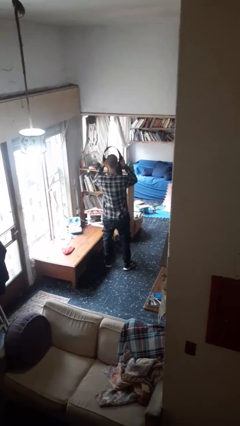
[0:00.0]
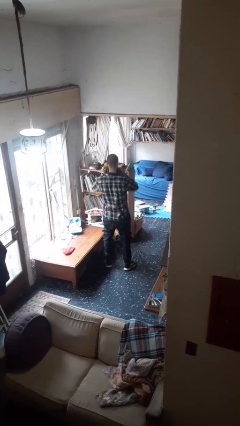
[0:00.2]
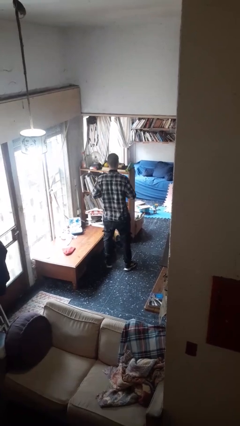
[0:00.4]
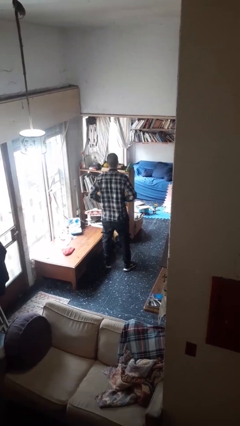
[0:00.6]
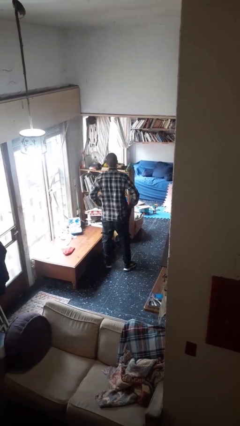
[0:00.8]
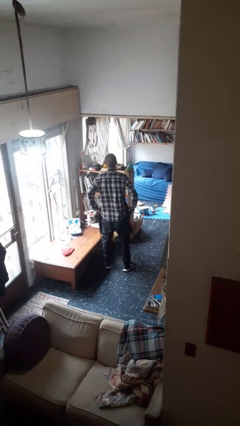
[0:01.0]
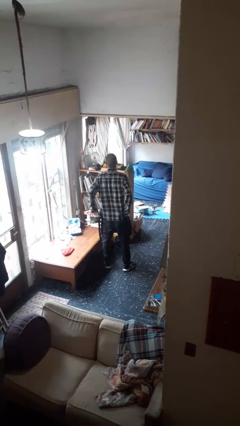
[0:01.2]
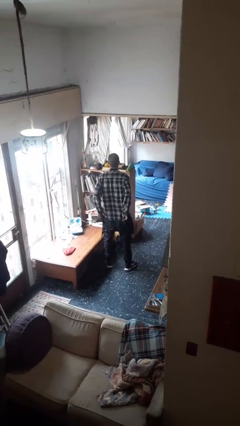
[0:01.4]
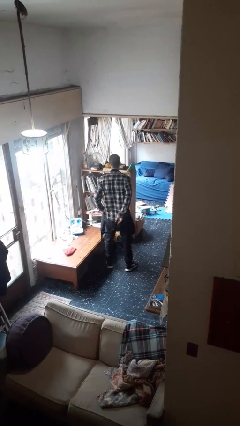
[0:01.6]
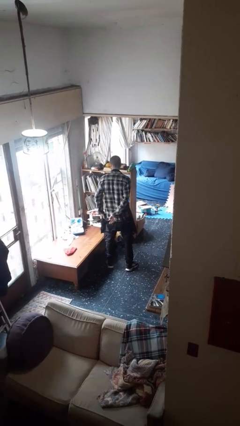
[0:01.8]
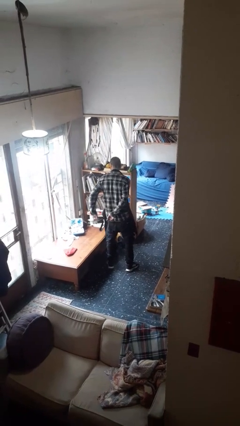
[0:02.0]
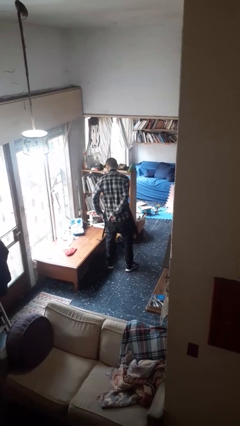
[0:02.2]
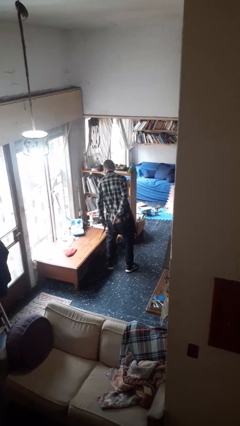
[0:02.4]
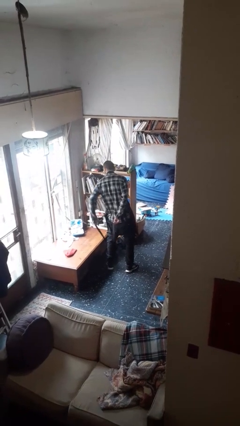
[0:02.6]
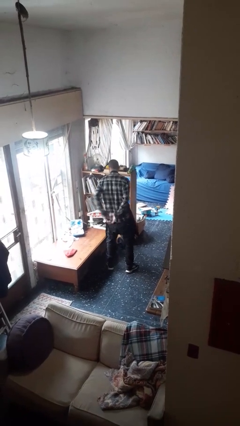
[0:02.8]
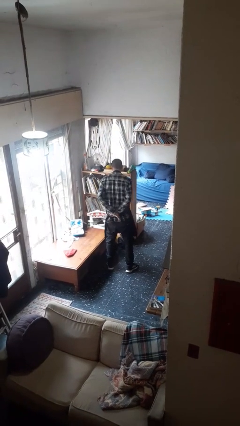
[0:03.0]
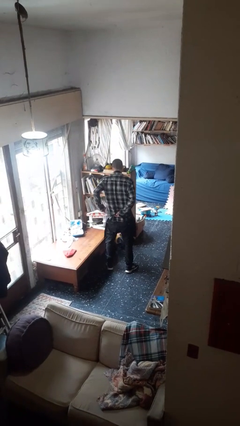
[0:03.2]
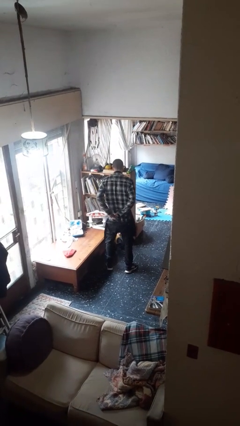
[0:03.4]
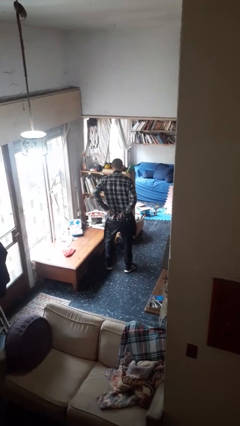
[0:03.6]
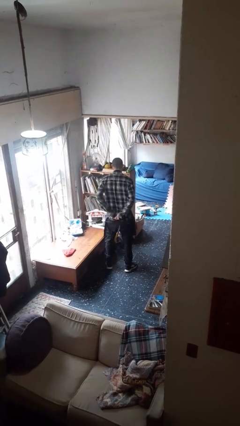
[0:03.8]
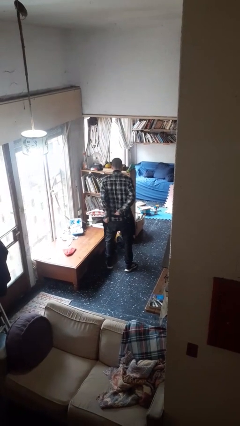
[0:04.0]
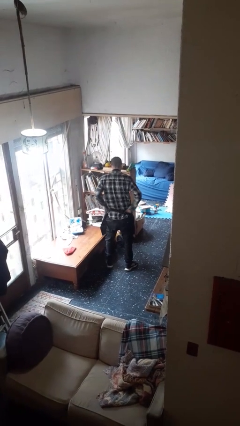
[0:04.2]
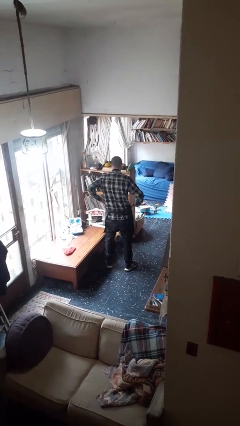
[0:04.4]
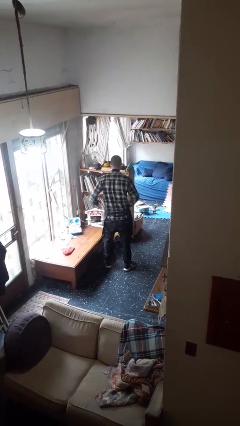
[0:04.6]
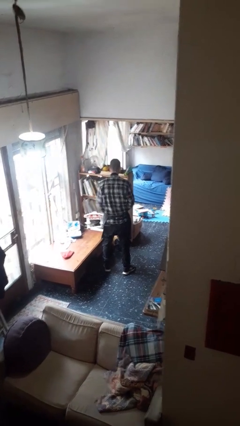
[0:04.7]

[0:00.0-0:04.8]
person puts on apron

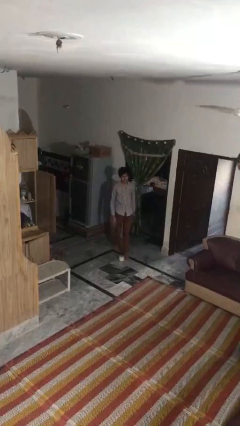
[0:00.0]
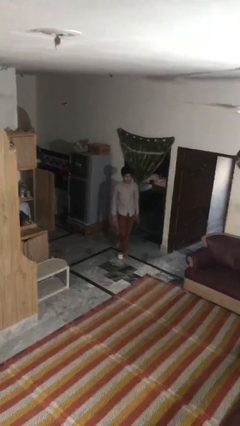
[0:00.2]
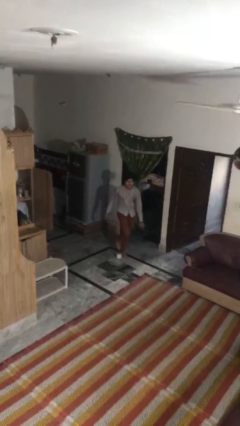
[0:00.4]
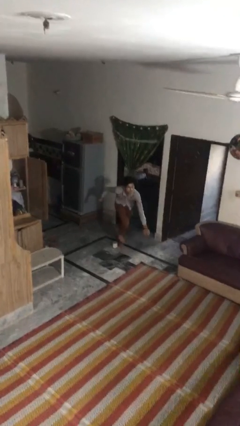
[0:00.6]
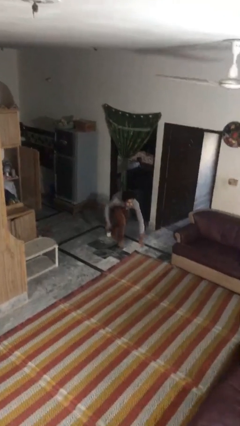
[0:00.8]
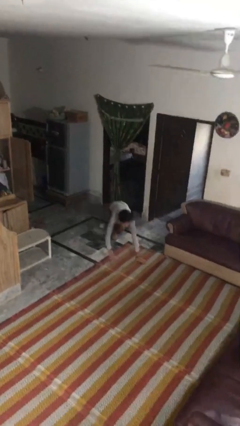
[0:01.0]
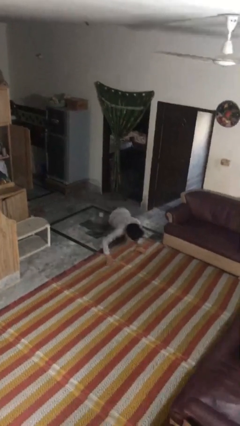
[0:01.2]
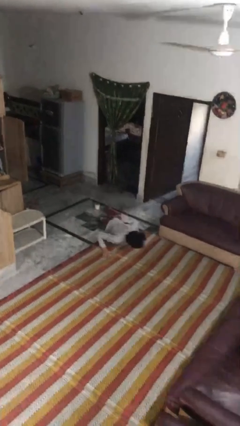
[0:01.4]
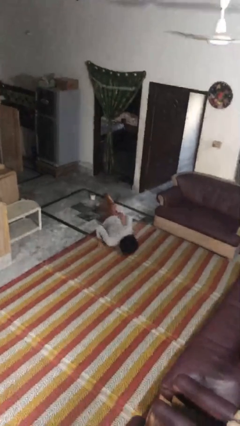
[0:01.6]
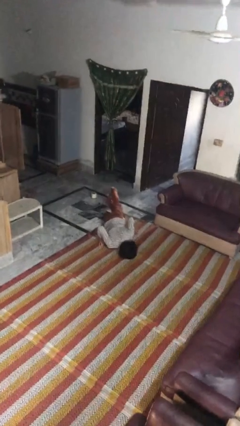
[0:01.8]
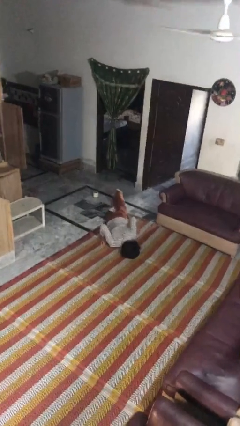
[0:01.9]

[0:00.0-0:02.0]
person trips on object on floor

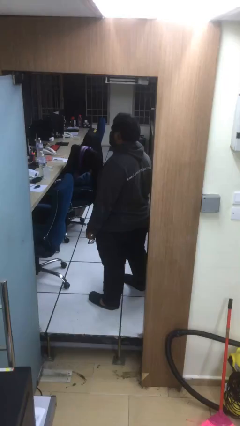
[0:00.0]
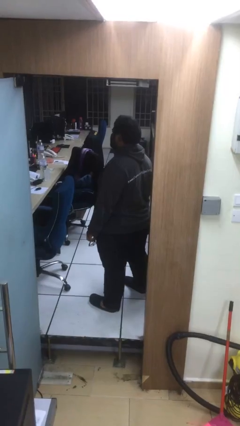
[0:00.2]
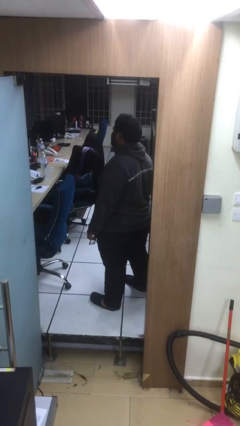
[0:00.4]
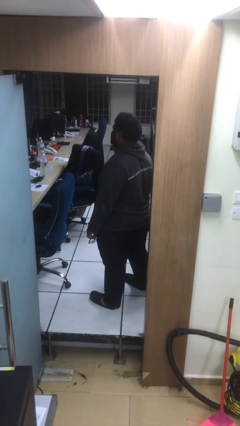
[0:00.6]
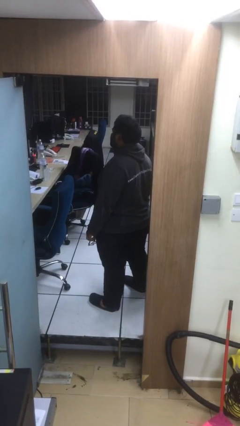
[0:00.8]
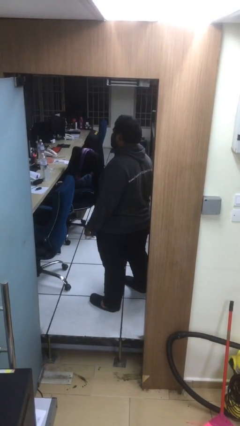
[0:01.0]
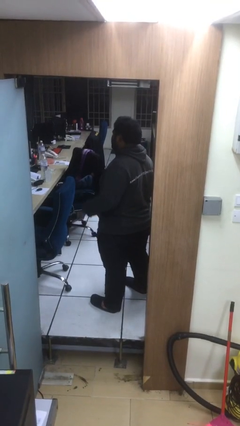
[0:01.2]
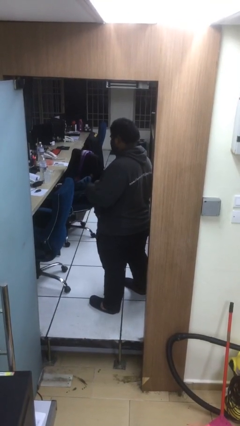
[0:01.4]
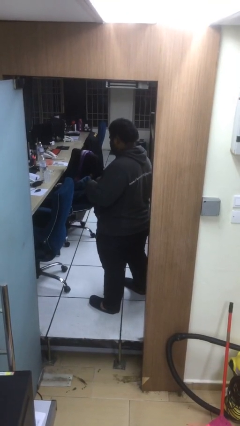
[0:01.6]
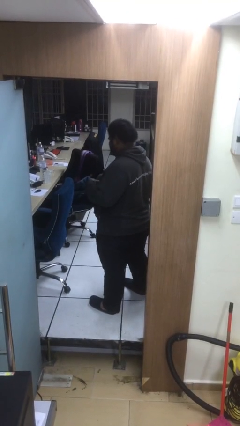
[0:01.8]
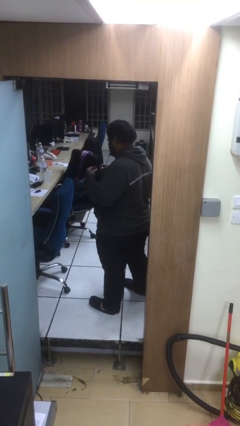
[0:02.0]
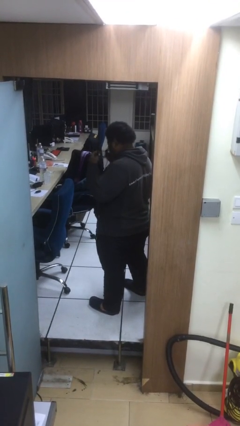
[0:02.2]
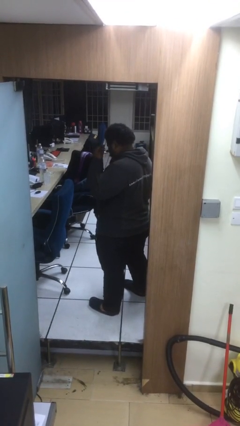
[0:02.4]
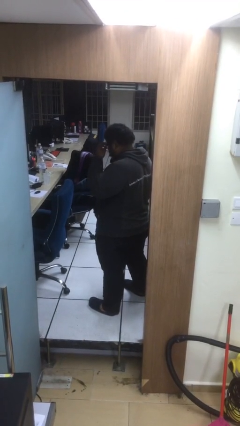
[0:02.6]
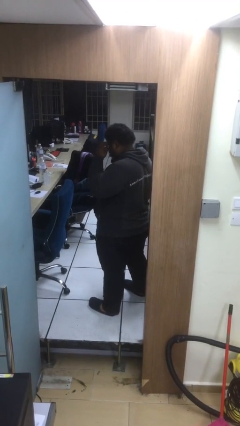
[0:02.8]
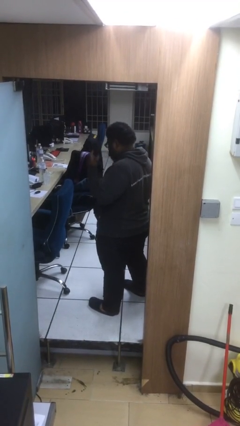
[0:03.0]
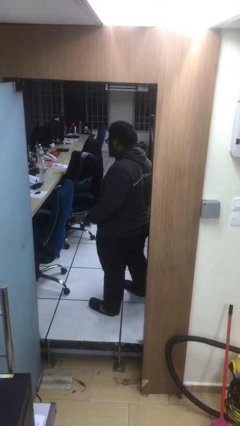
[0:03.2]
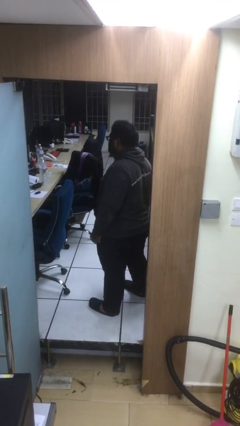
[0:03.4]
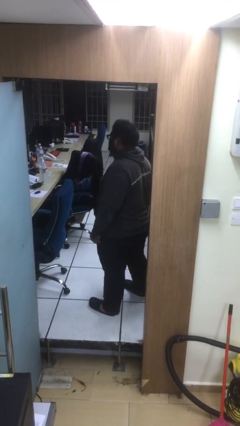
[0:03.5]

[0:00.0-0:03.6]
person puts on glasses

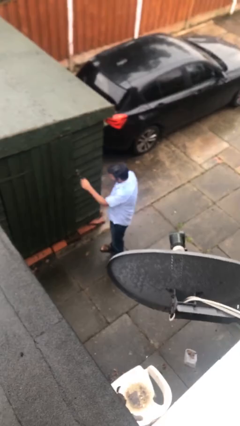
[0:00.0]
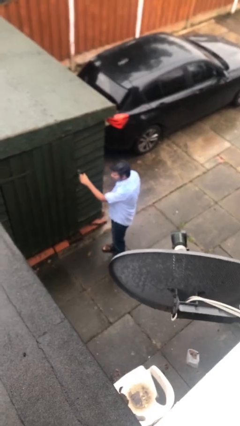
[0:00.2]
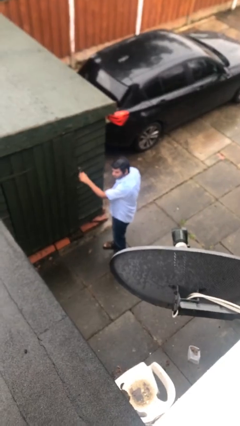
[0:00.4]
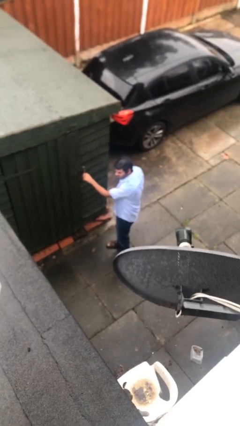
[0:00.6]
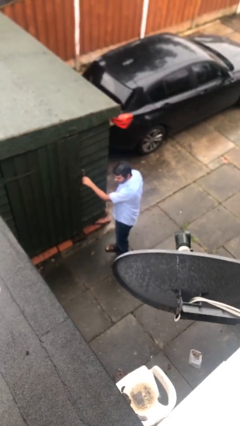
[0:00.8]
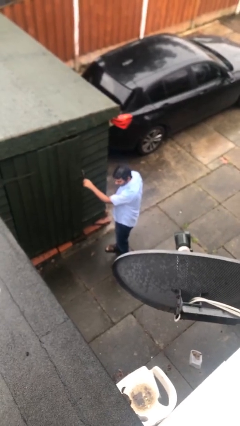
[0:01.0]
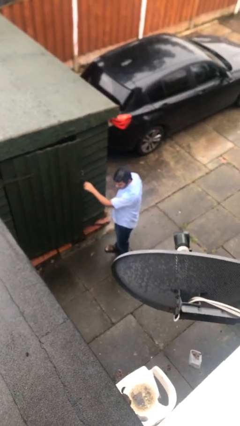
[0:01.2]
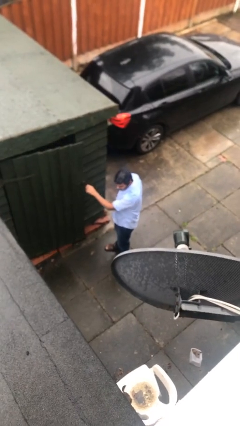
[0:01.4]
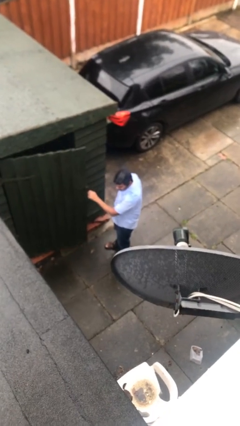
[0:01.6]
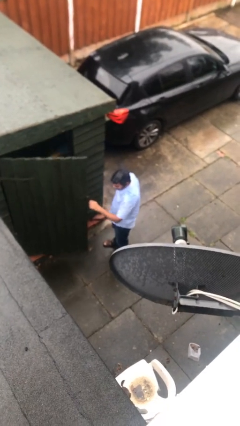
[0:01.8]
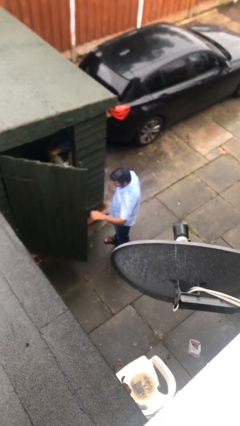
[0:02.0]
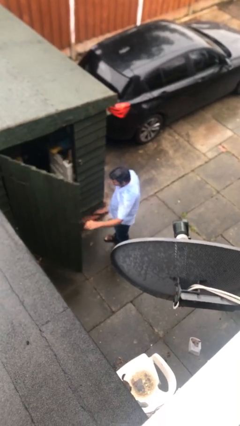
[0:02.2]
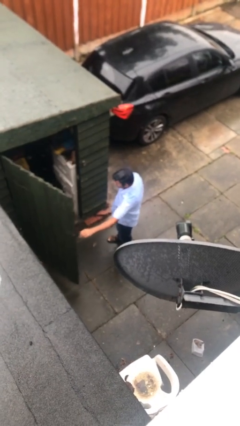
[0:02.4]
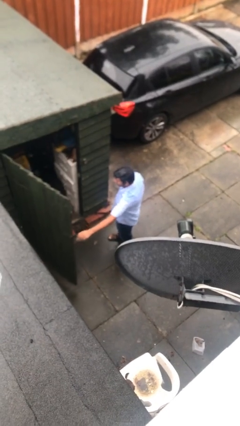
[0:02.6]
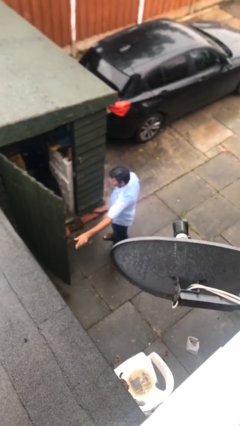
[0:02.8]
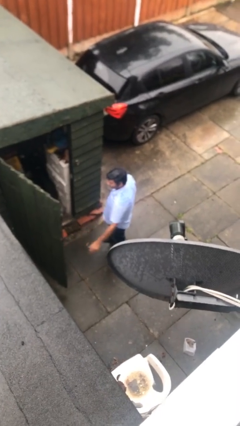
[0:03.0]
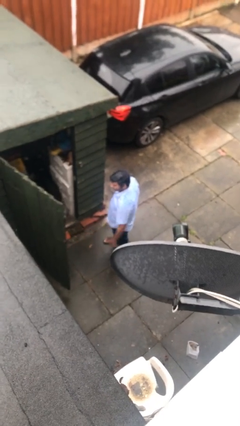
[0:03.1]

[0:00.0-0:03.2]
person opens facility door

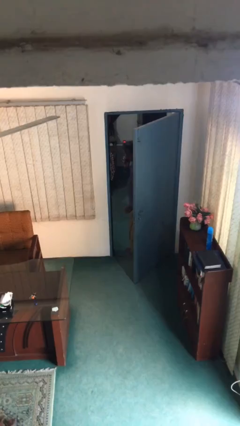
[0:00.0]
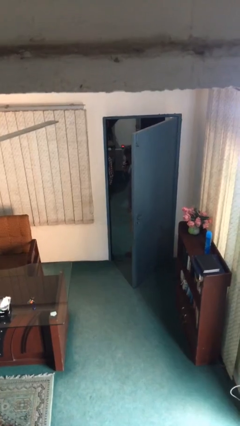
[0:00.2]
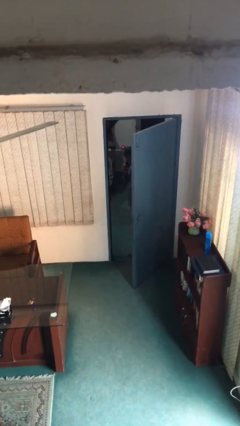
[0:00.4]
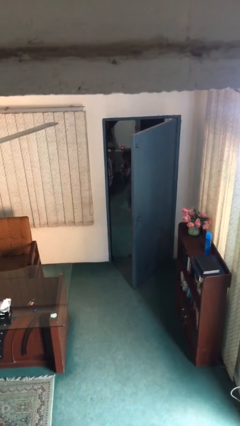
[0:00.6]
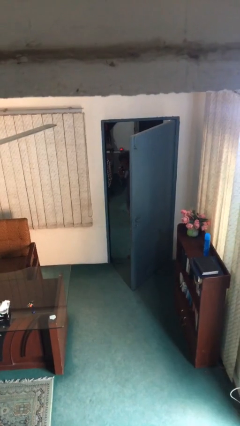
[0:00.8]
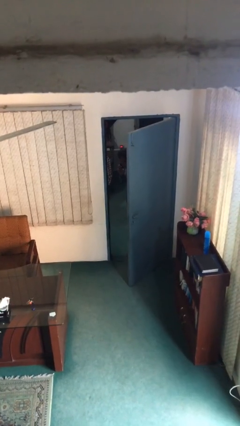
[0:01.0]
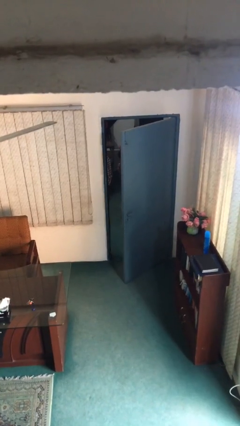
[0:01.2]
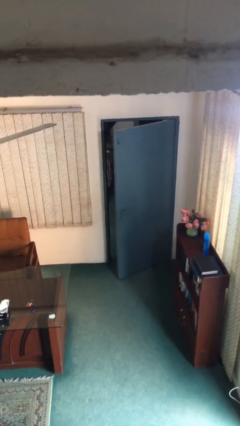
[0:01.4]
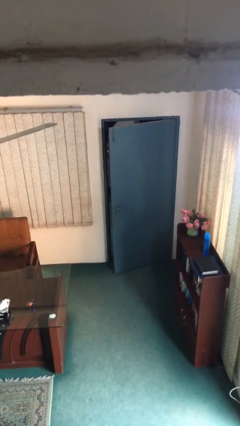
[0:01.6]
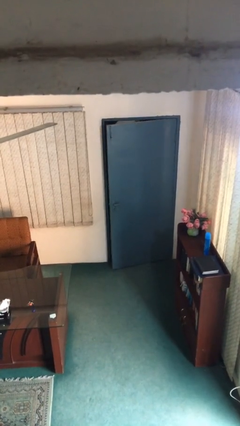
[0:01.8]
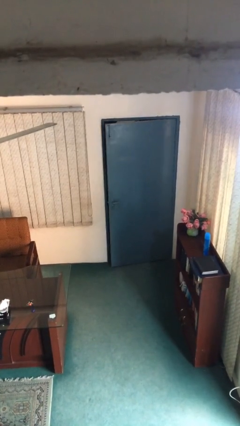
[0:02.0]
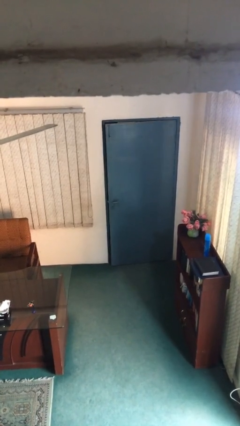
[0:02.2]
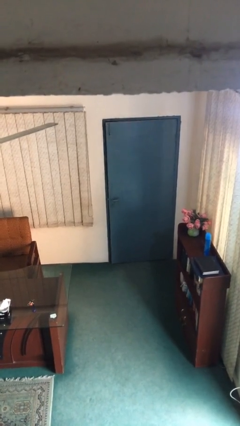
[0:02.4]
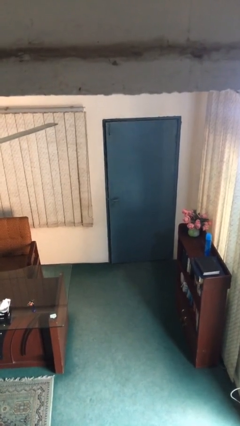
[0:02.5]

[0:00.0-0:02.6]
person closes facility door

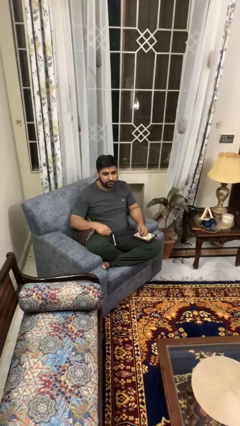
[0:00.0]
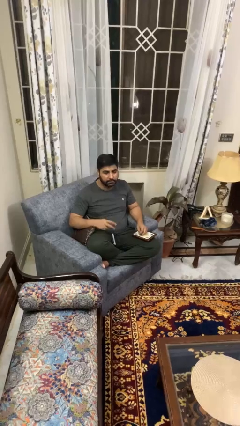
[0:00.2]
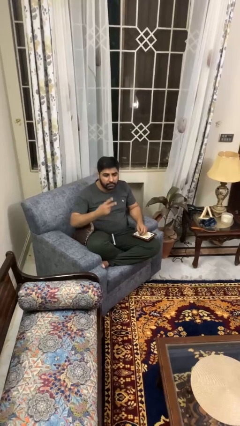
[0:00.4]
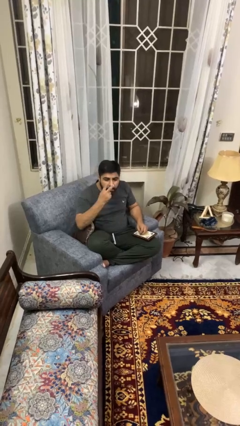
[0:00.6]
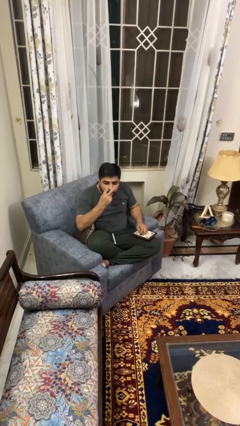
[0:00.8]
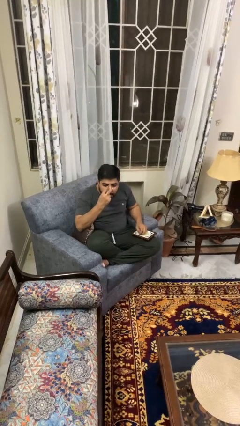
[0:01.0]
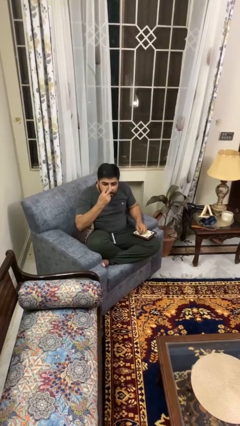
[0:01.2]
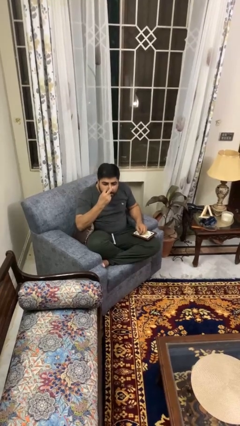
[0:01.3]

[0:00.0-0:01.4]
person gestures watch closely
